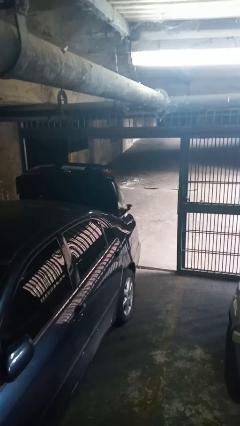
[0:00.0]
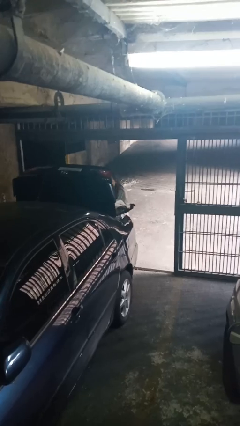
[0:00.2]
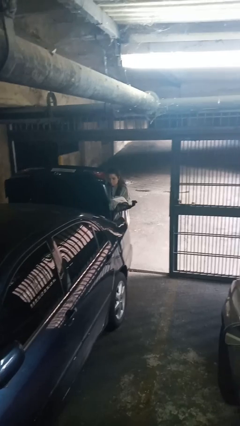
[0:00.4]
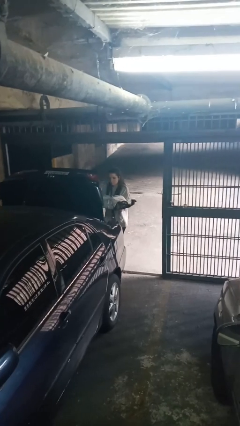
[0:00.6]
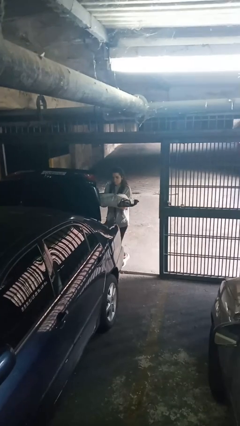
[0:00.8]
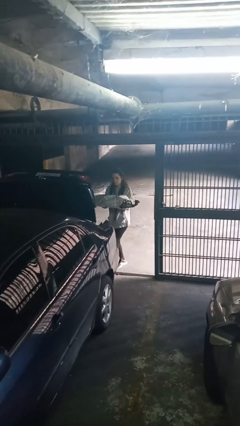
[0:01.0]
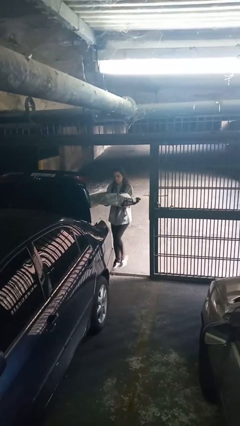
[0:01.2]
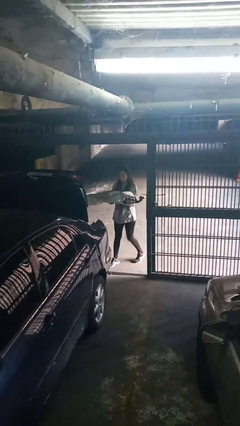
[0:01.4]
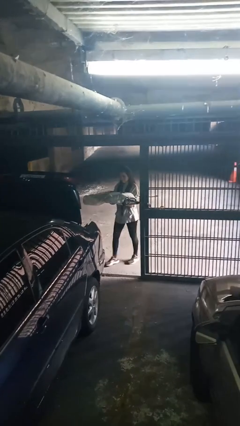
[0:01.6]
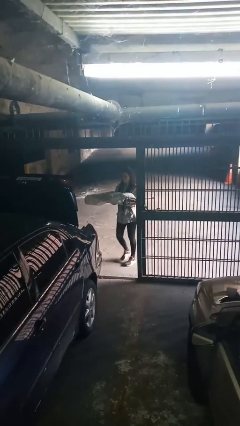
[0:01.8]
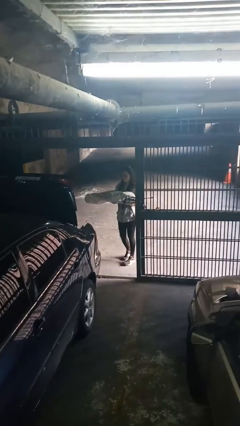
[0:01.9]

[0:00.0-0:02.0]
person unloads car

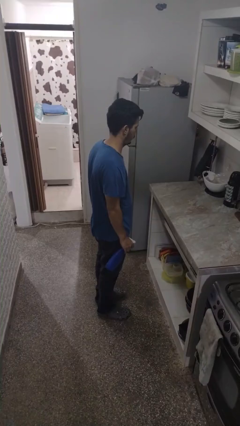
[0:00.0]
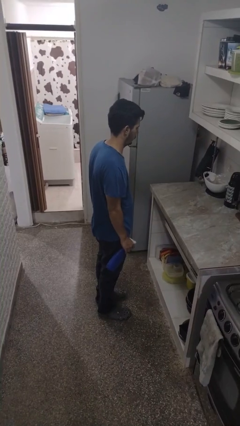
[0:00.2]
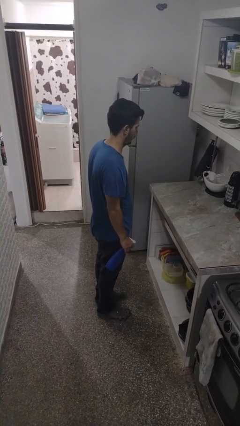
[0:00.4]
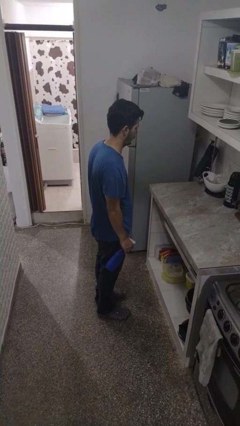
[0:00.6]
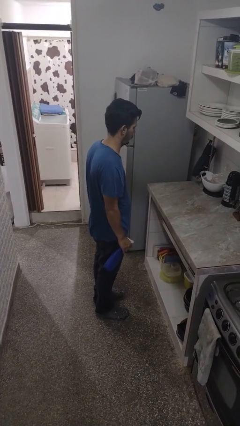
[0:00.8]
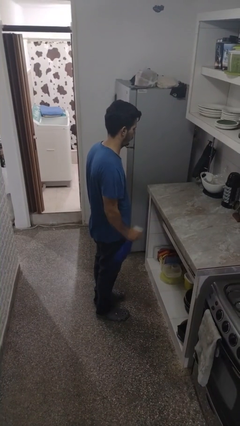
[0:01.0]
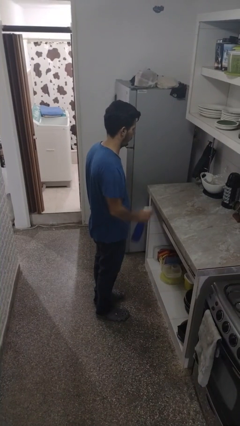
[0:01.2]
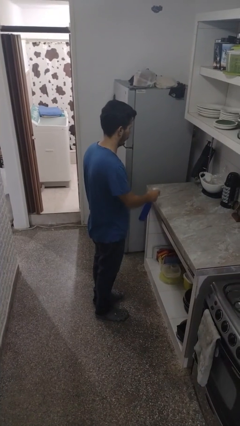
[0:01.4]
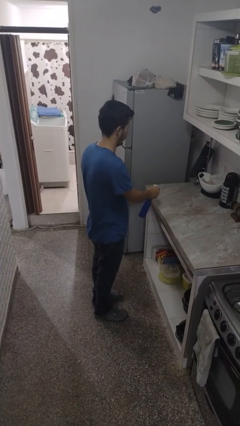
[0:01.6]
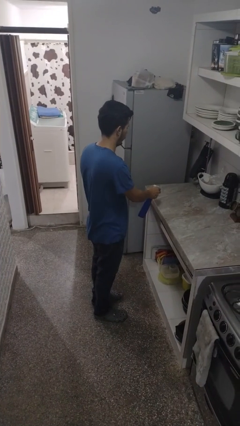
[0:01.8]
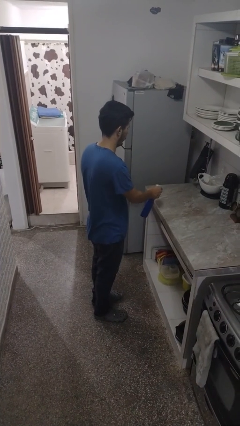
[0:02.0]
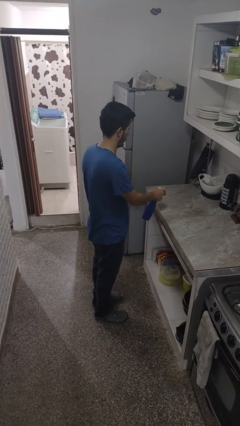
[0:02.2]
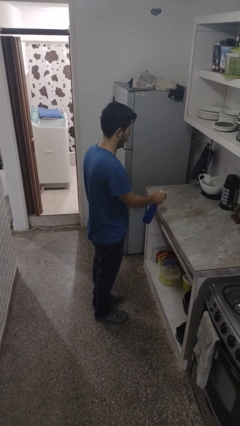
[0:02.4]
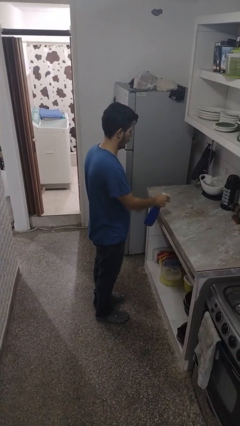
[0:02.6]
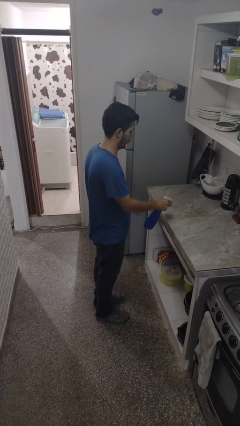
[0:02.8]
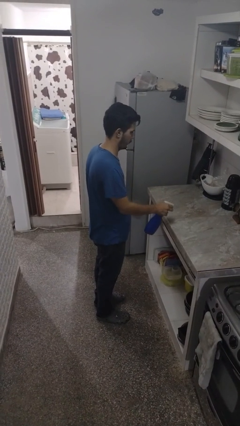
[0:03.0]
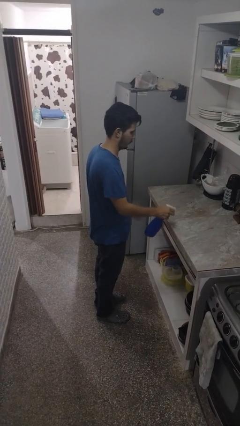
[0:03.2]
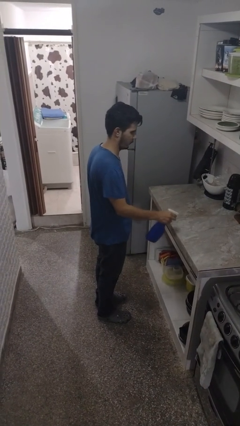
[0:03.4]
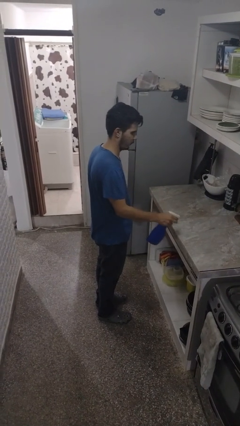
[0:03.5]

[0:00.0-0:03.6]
person sprays from bottle

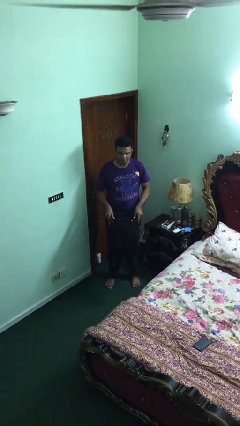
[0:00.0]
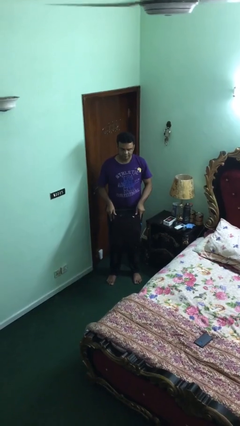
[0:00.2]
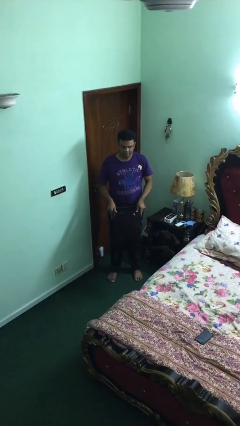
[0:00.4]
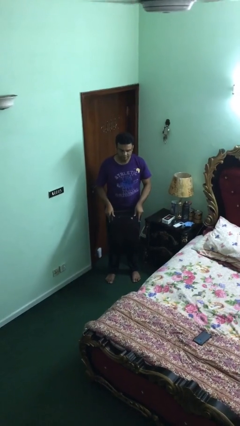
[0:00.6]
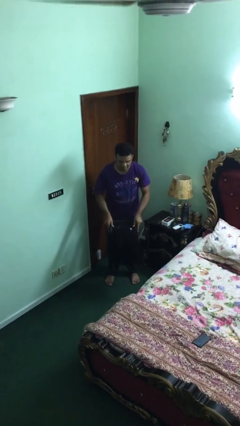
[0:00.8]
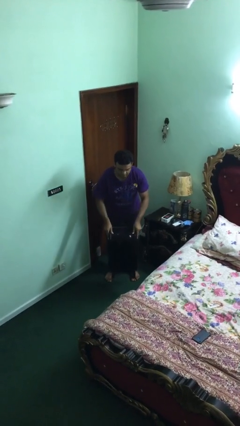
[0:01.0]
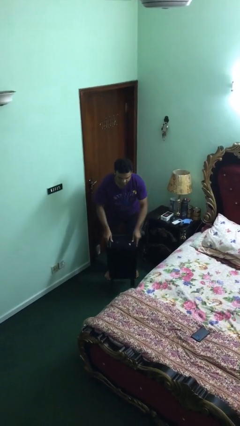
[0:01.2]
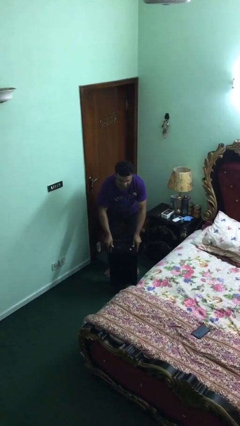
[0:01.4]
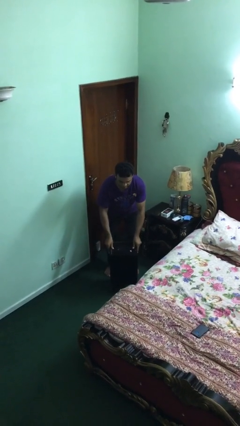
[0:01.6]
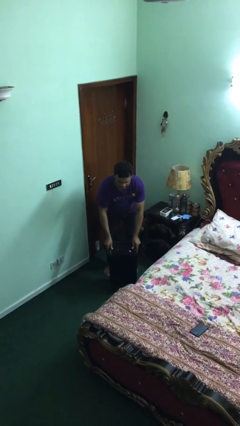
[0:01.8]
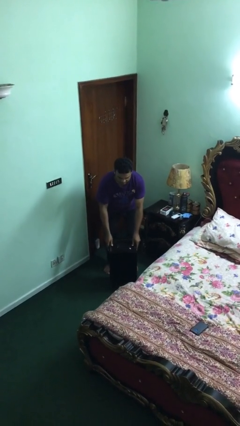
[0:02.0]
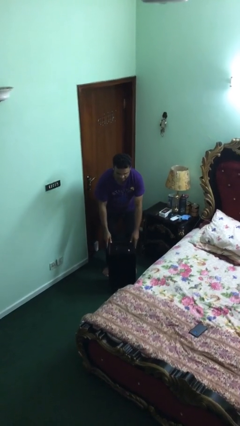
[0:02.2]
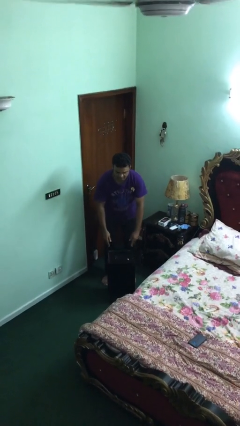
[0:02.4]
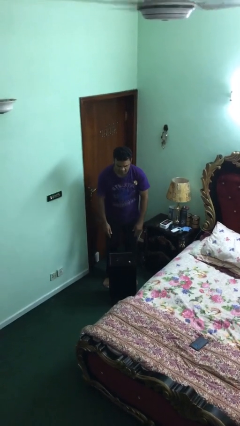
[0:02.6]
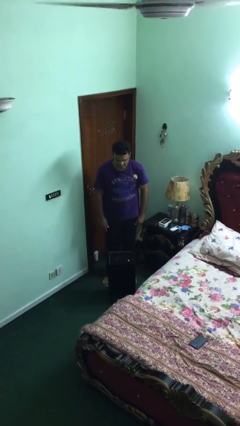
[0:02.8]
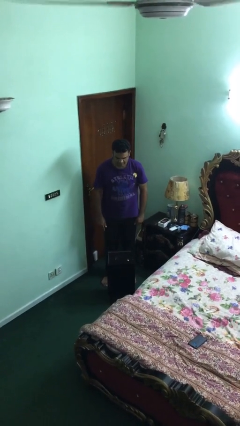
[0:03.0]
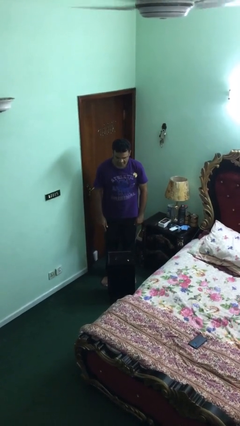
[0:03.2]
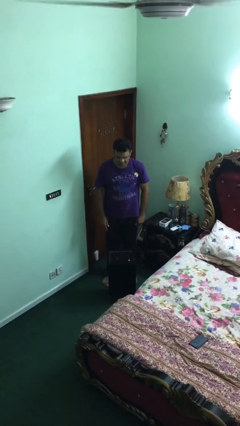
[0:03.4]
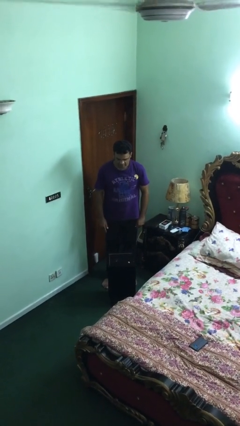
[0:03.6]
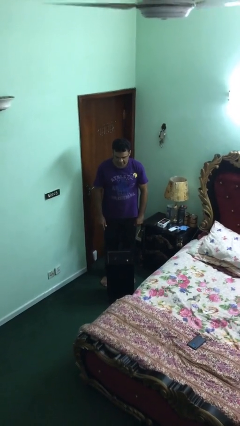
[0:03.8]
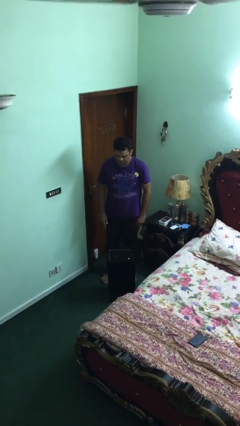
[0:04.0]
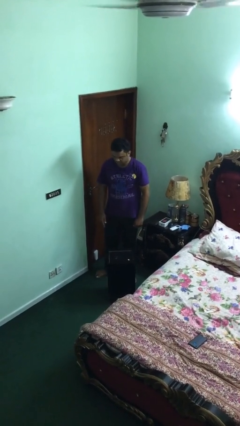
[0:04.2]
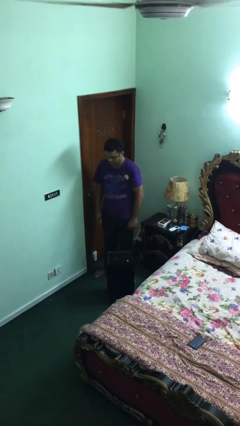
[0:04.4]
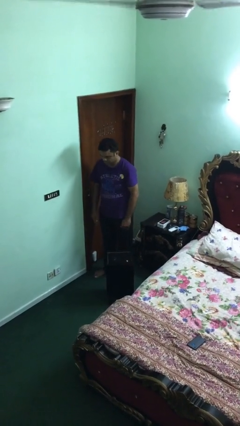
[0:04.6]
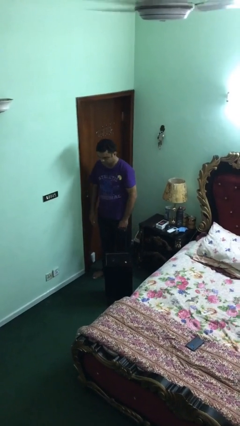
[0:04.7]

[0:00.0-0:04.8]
person puts down object on floor

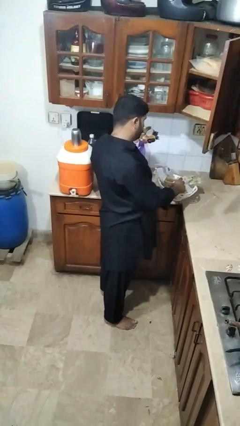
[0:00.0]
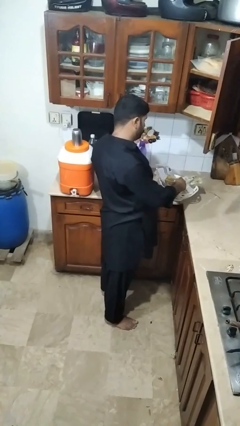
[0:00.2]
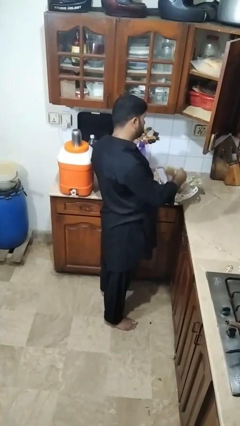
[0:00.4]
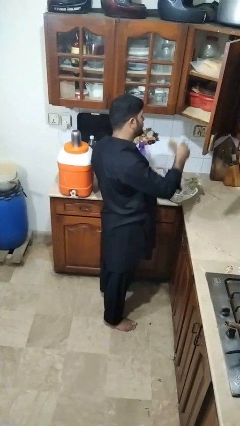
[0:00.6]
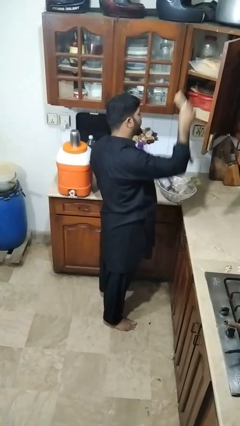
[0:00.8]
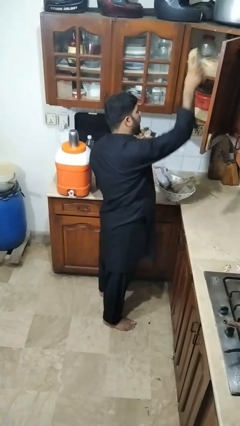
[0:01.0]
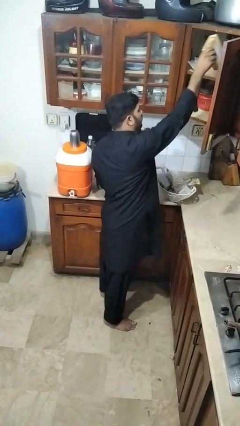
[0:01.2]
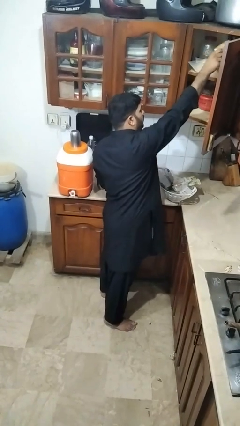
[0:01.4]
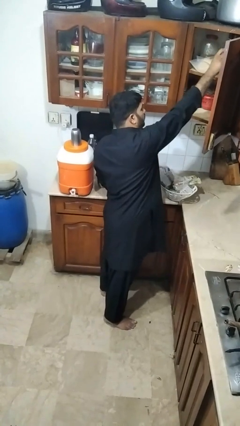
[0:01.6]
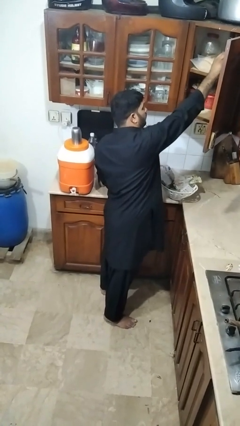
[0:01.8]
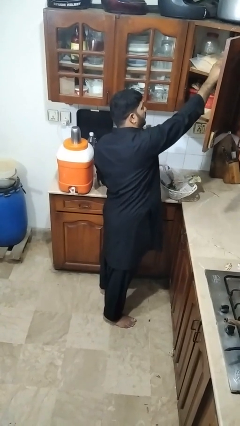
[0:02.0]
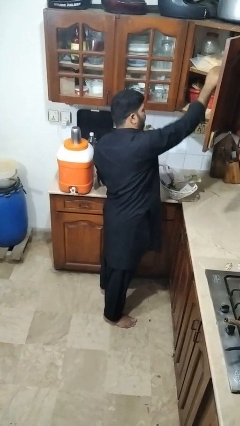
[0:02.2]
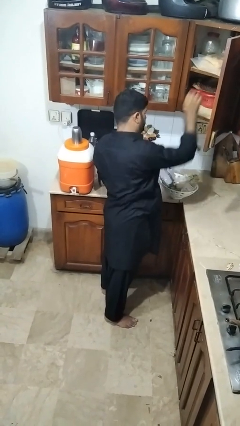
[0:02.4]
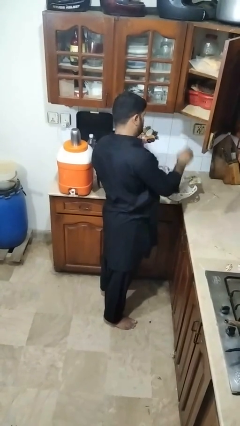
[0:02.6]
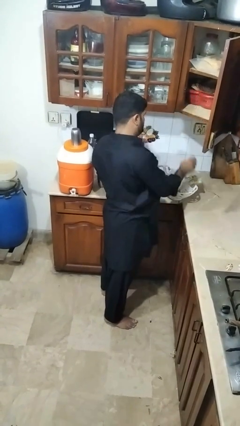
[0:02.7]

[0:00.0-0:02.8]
person loads groceries into cabinet

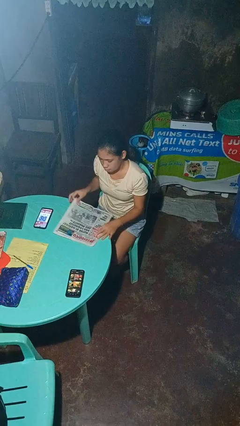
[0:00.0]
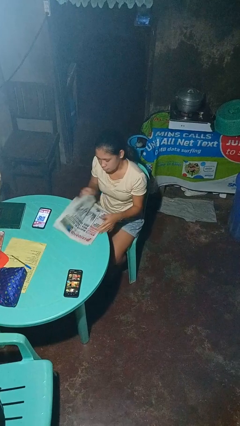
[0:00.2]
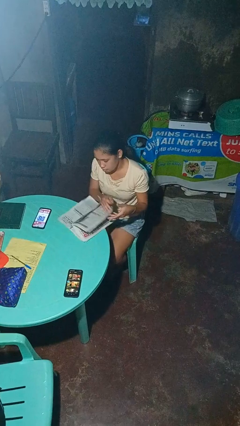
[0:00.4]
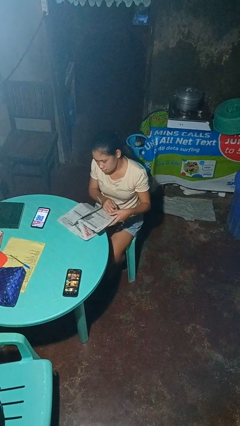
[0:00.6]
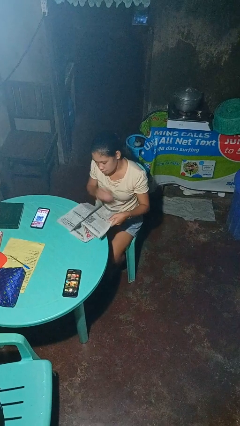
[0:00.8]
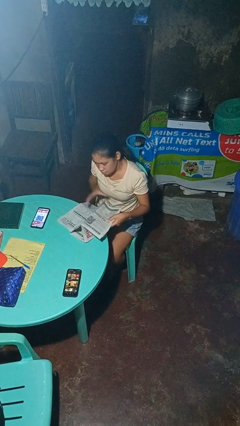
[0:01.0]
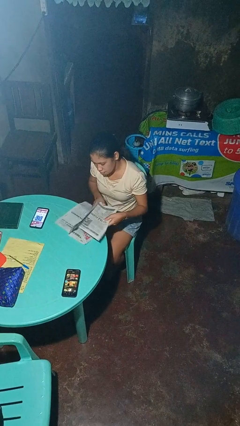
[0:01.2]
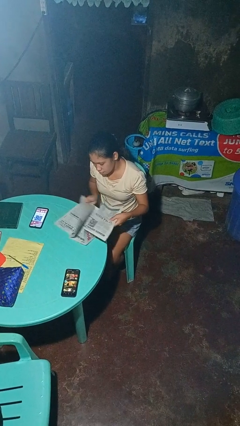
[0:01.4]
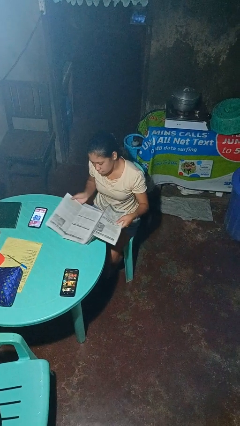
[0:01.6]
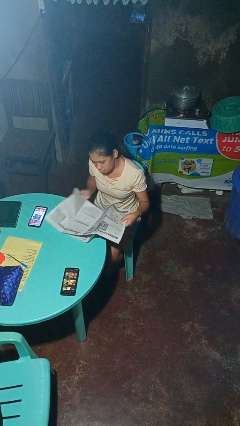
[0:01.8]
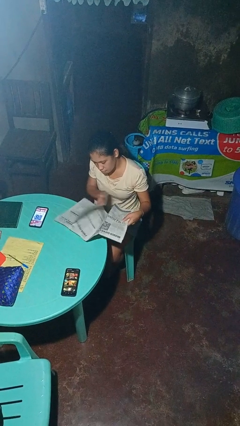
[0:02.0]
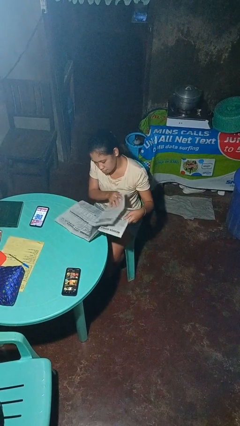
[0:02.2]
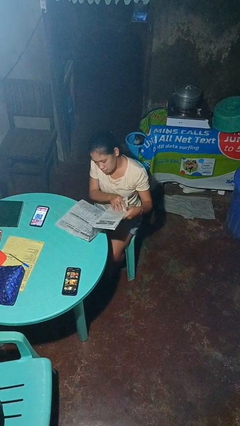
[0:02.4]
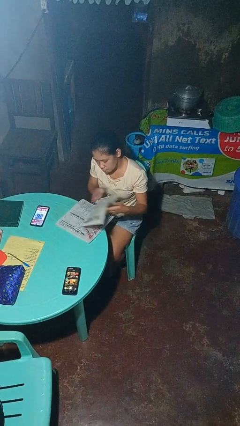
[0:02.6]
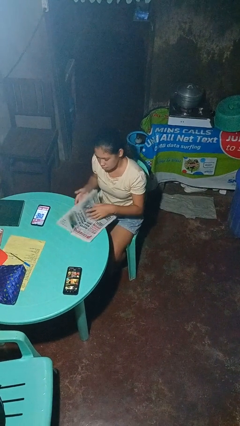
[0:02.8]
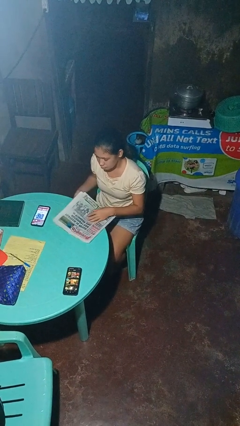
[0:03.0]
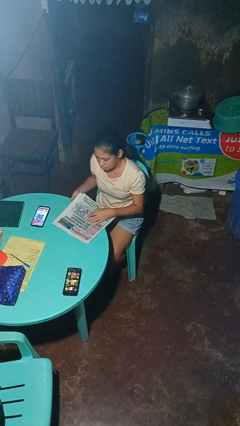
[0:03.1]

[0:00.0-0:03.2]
person reads newspaper

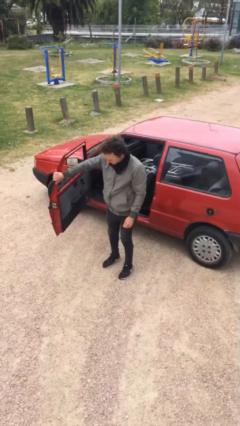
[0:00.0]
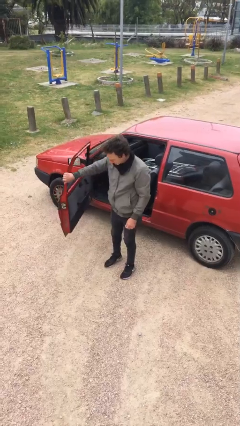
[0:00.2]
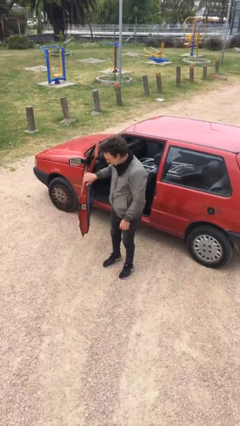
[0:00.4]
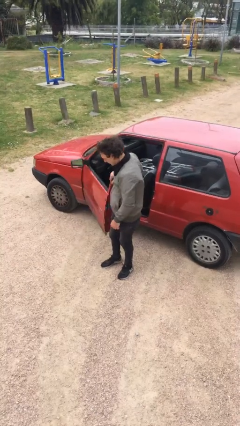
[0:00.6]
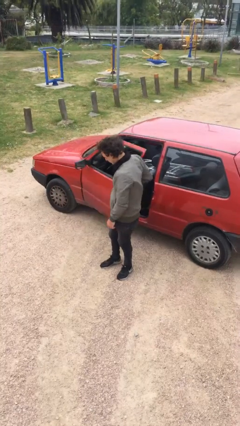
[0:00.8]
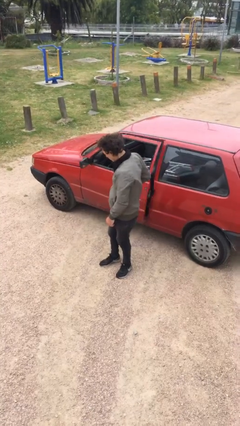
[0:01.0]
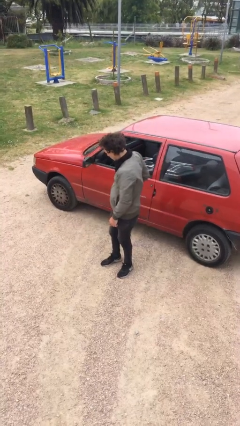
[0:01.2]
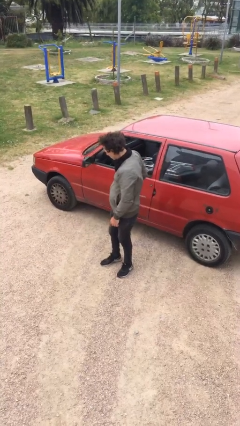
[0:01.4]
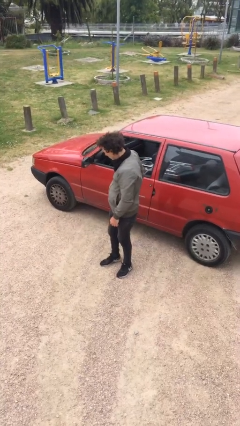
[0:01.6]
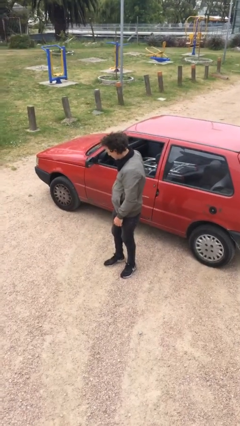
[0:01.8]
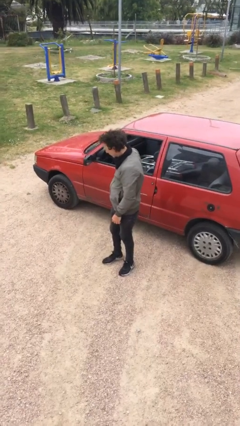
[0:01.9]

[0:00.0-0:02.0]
person closes car door
